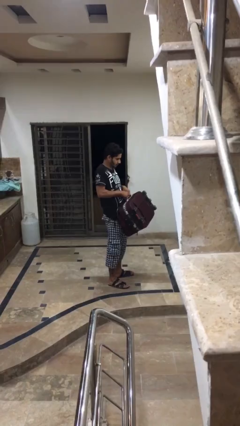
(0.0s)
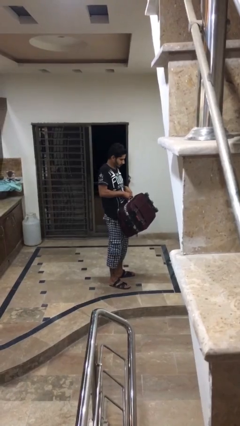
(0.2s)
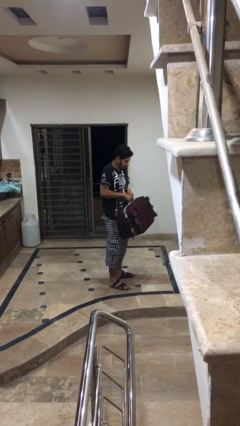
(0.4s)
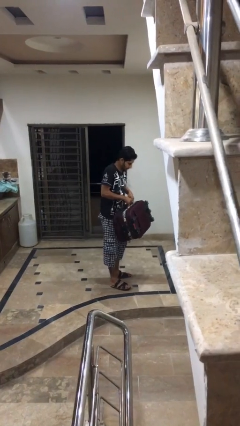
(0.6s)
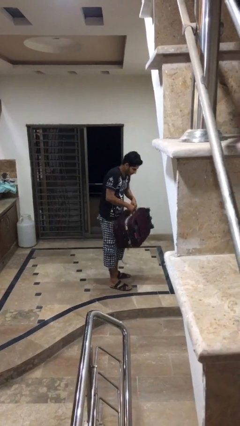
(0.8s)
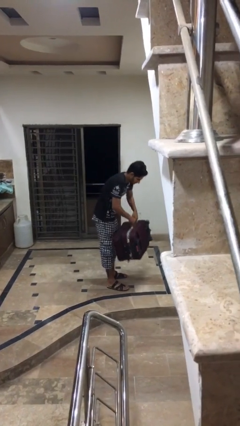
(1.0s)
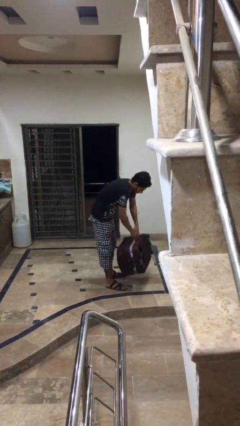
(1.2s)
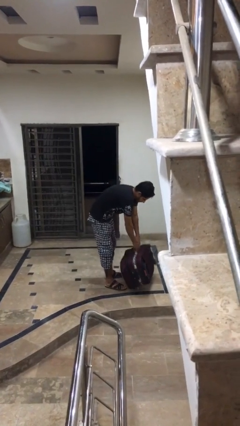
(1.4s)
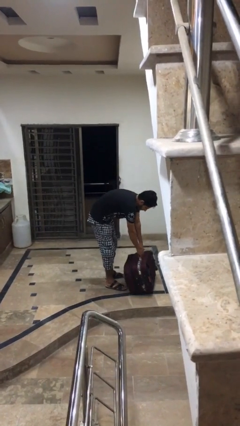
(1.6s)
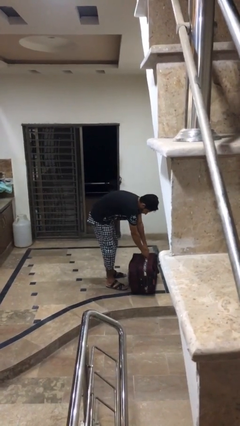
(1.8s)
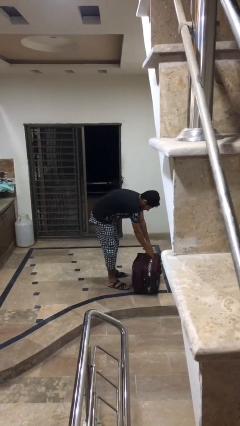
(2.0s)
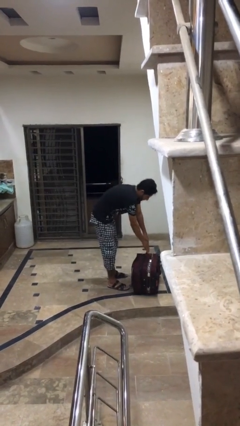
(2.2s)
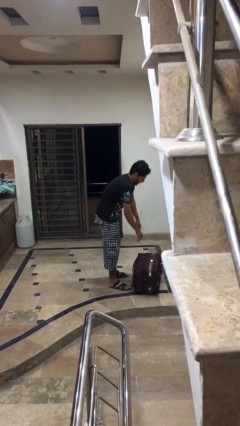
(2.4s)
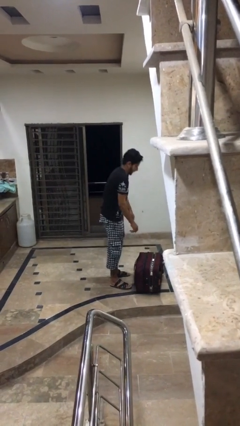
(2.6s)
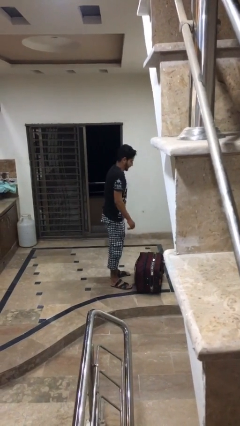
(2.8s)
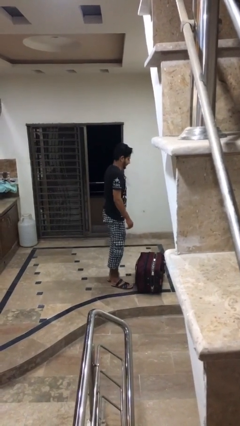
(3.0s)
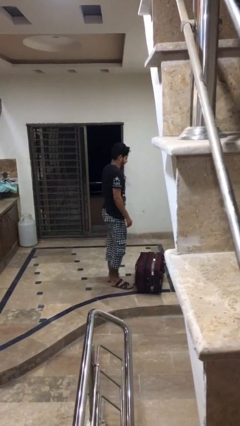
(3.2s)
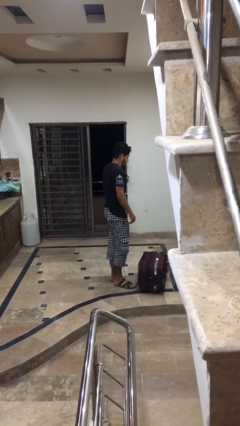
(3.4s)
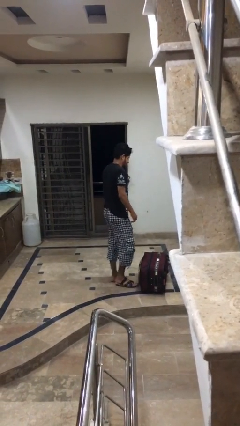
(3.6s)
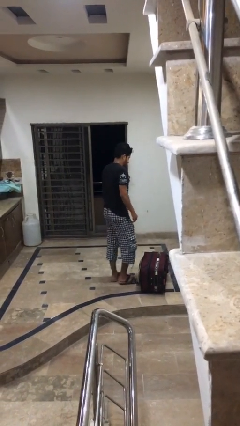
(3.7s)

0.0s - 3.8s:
person puts down object on floor

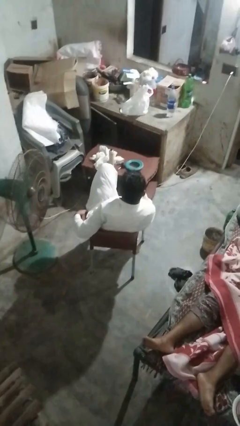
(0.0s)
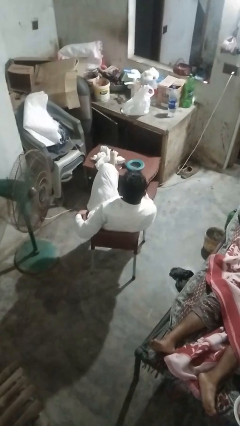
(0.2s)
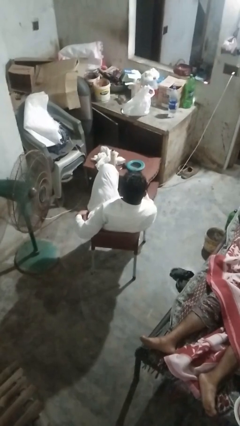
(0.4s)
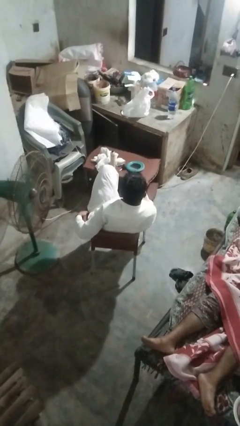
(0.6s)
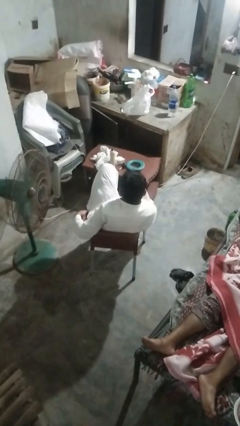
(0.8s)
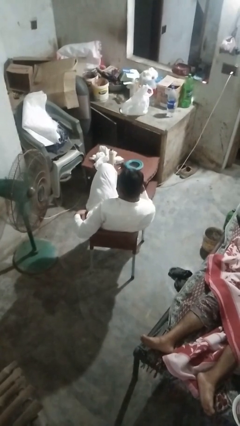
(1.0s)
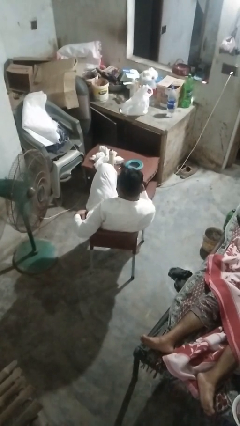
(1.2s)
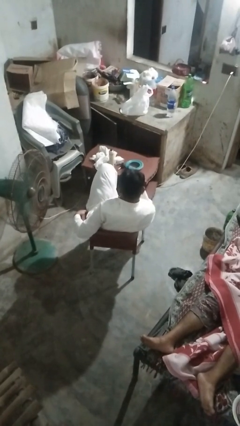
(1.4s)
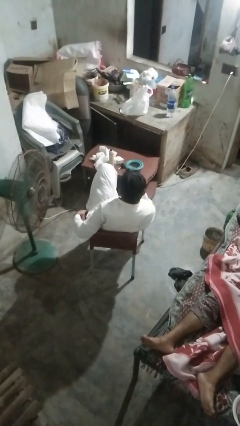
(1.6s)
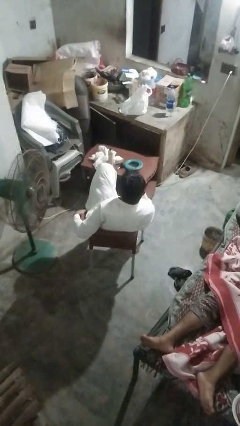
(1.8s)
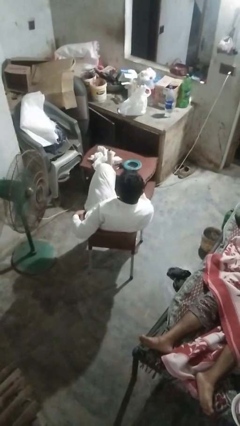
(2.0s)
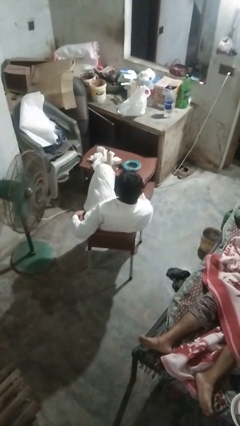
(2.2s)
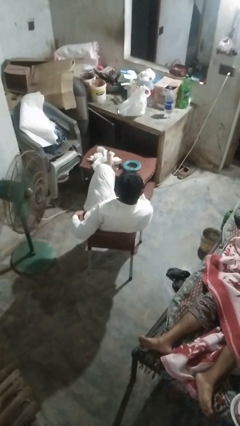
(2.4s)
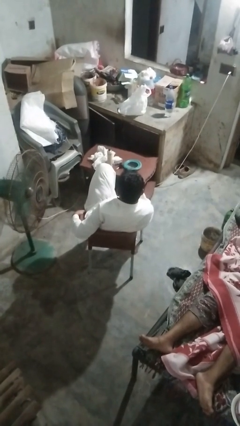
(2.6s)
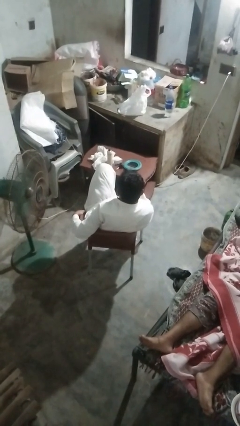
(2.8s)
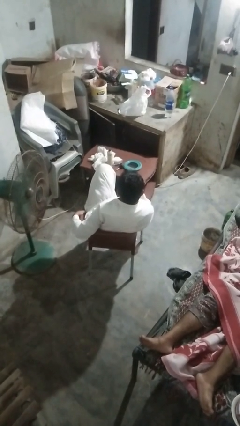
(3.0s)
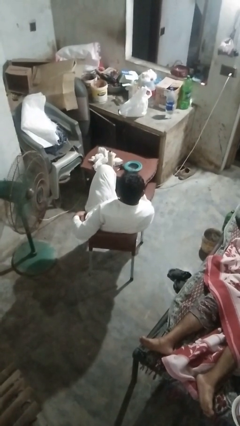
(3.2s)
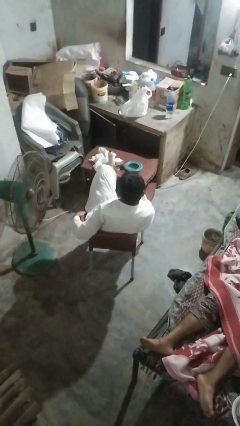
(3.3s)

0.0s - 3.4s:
person nods head

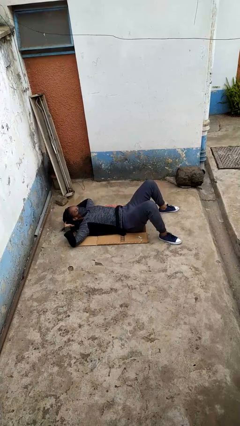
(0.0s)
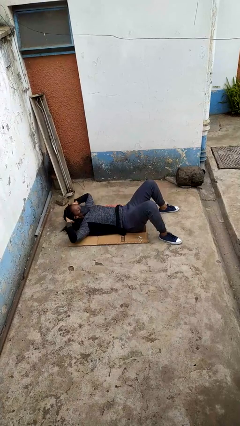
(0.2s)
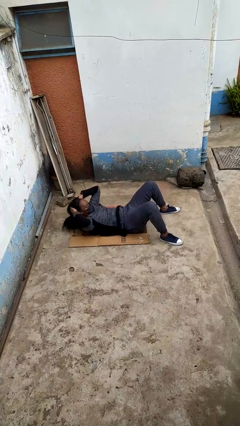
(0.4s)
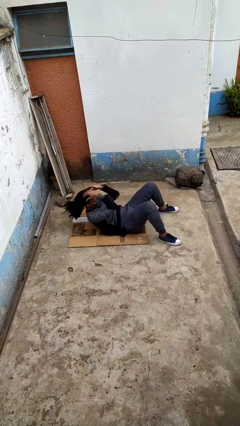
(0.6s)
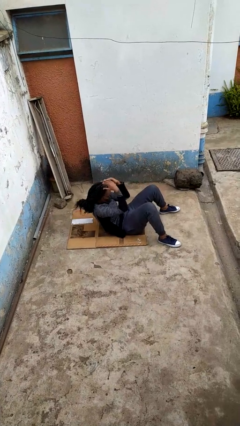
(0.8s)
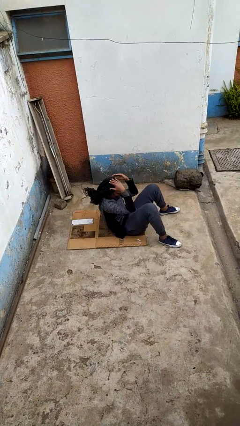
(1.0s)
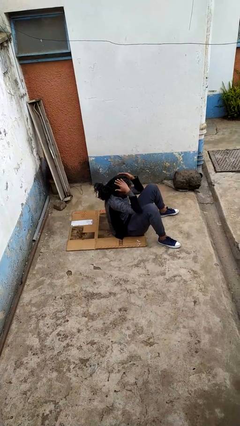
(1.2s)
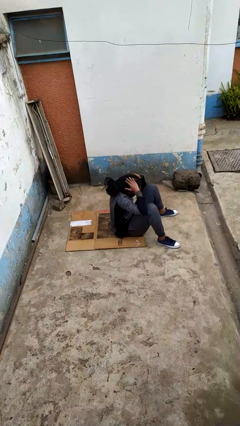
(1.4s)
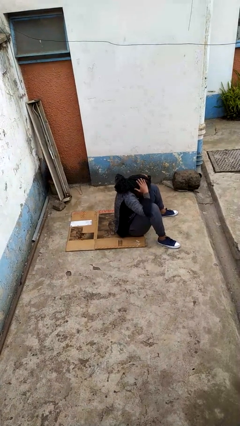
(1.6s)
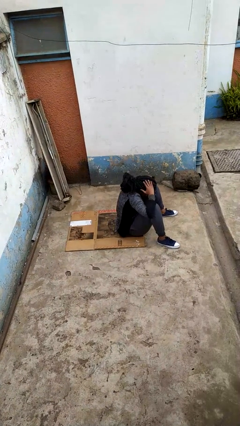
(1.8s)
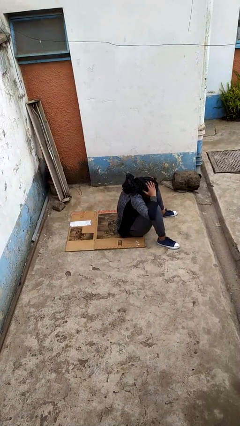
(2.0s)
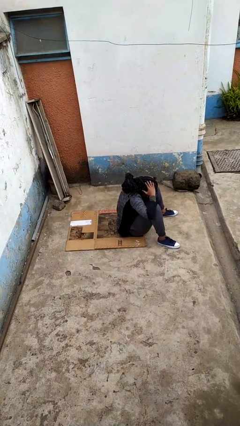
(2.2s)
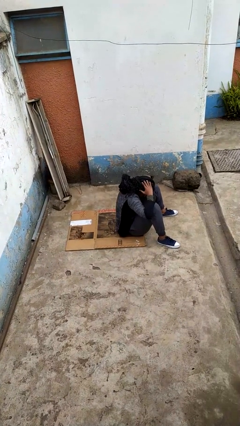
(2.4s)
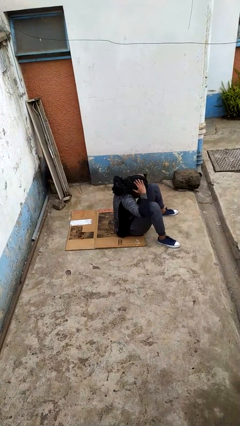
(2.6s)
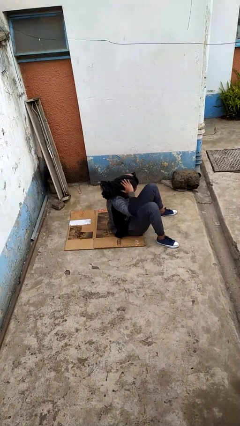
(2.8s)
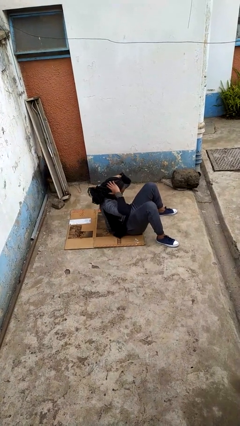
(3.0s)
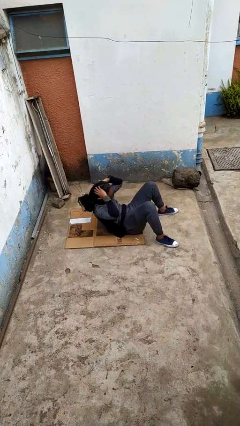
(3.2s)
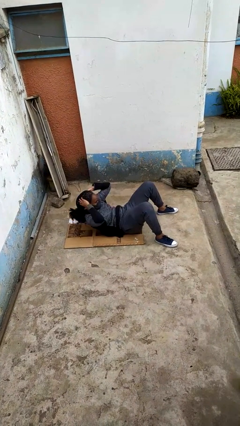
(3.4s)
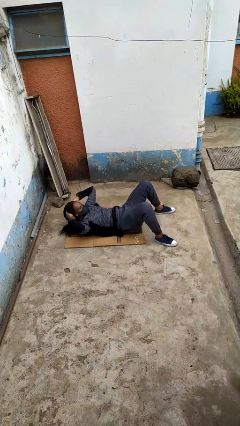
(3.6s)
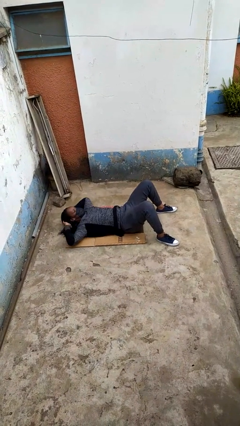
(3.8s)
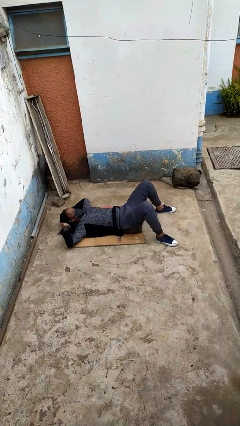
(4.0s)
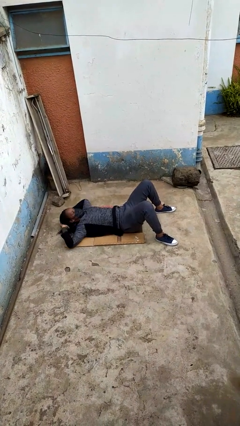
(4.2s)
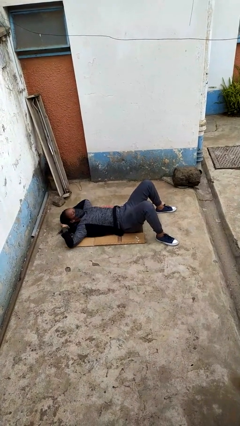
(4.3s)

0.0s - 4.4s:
person exercises with situp

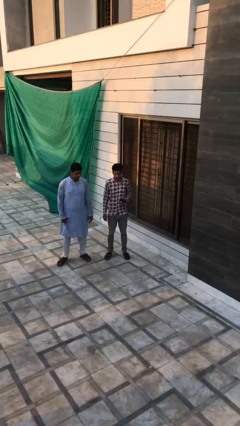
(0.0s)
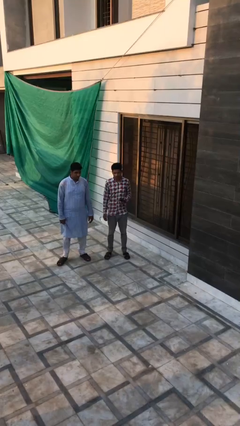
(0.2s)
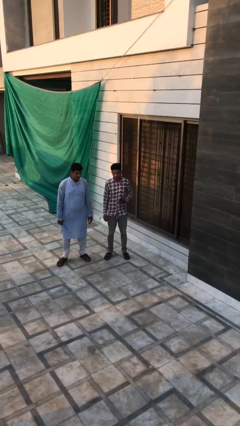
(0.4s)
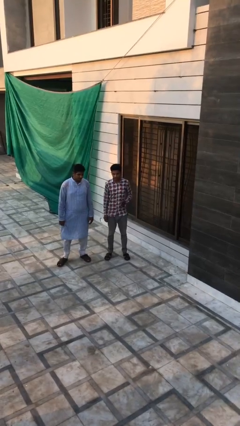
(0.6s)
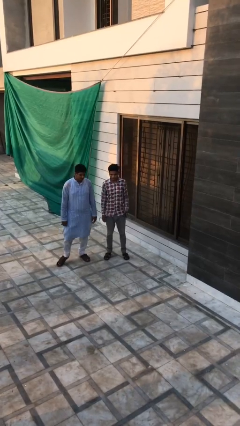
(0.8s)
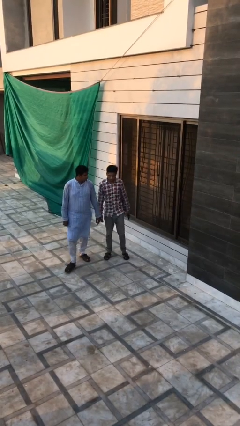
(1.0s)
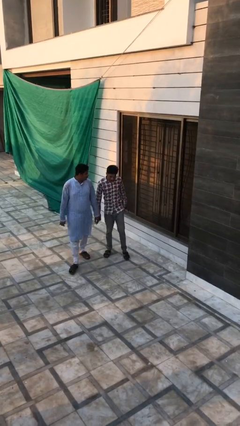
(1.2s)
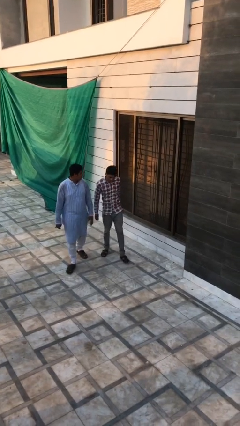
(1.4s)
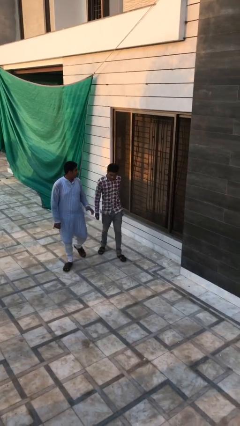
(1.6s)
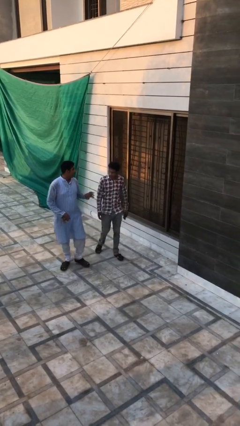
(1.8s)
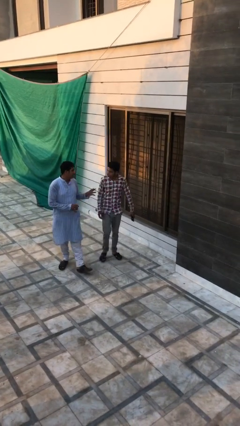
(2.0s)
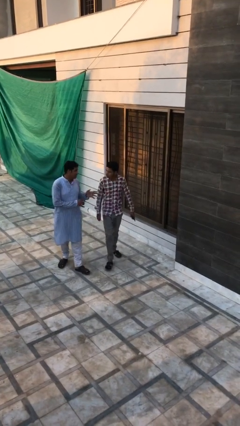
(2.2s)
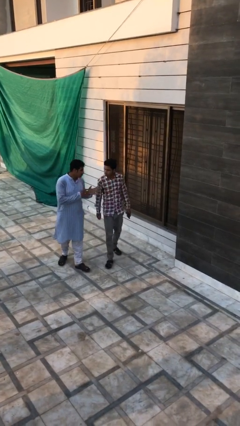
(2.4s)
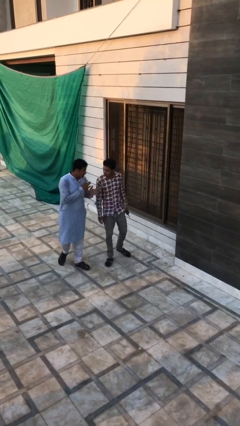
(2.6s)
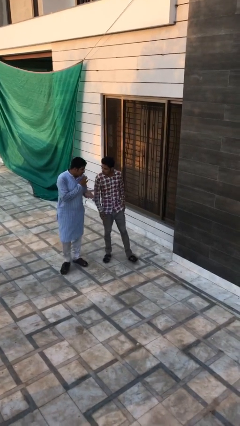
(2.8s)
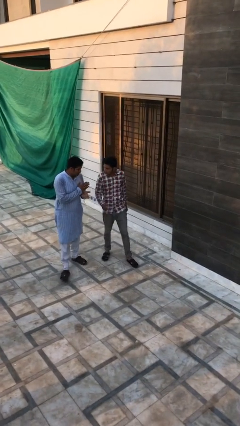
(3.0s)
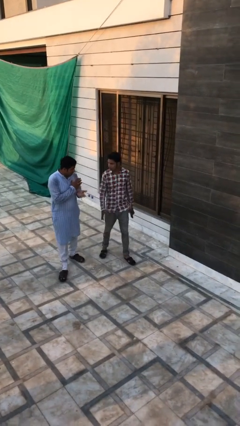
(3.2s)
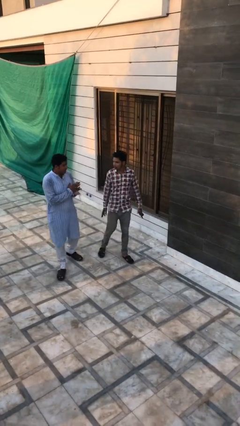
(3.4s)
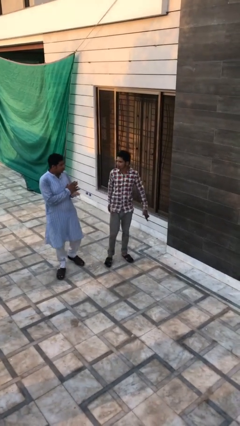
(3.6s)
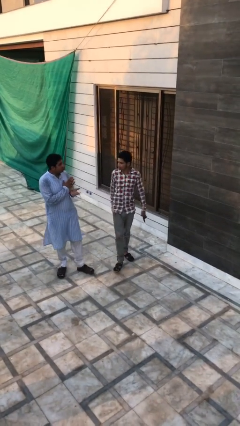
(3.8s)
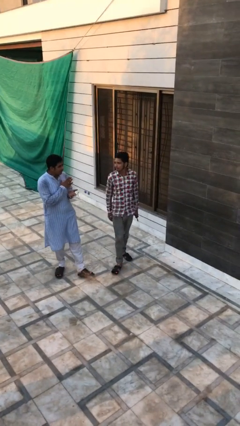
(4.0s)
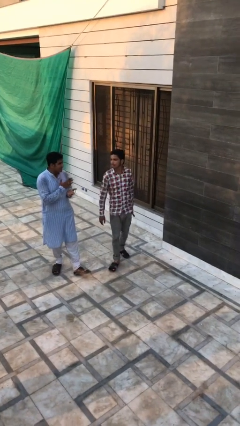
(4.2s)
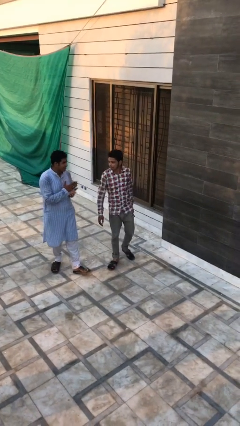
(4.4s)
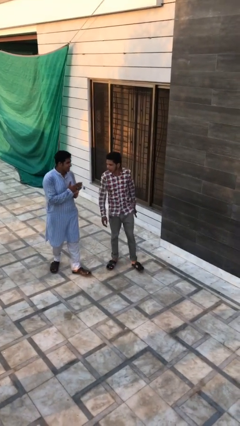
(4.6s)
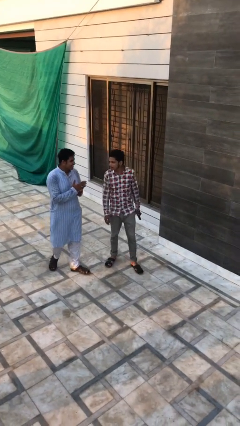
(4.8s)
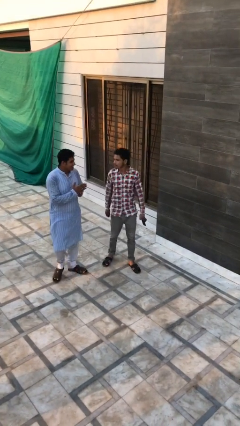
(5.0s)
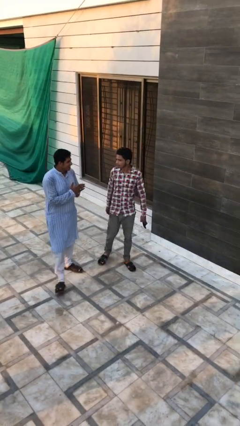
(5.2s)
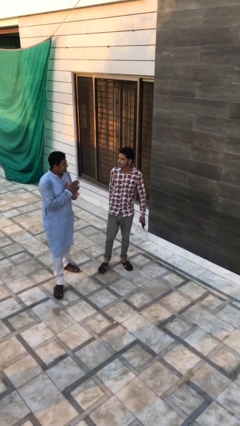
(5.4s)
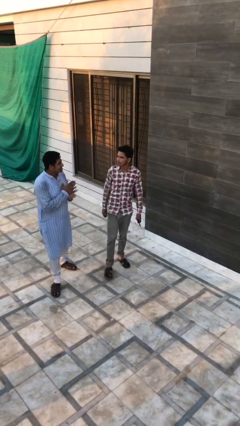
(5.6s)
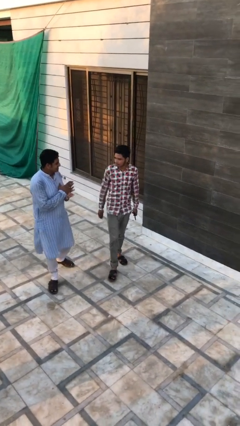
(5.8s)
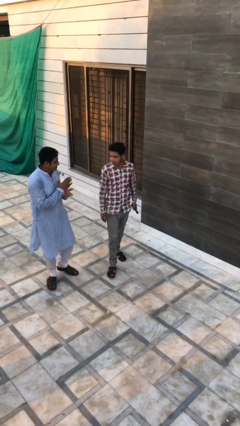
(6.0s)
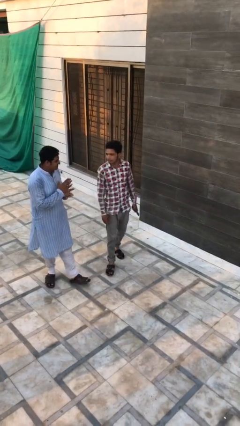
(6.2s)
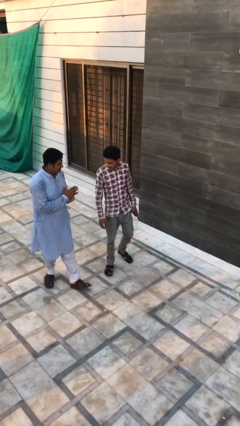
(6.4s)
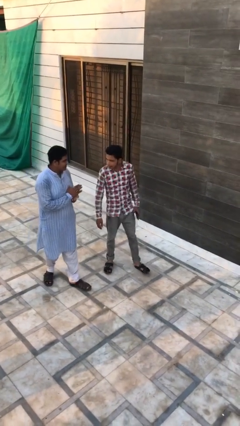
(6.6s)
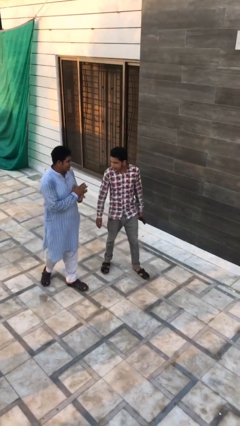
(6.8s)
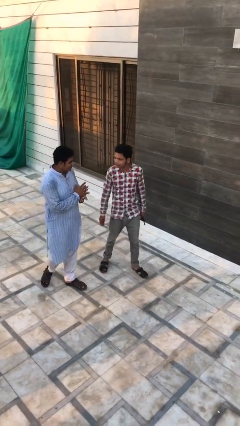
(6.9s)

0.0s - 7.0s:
person talks to person
